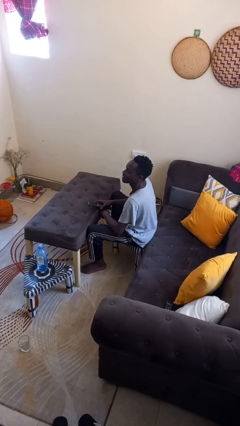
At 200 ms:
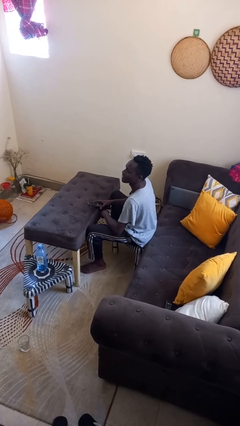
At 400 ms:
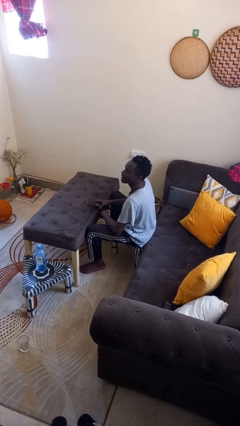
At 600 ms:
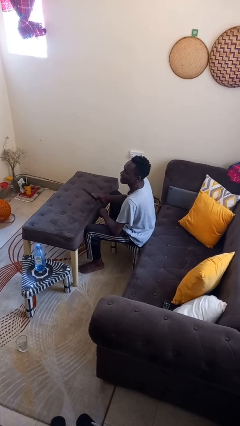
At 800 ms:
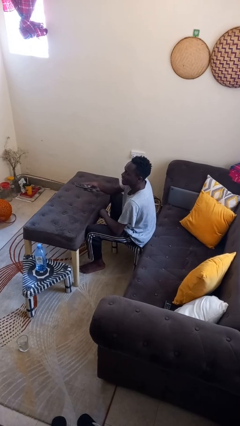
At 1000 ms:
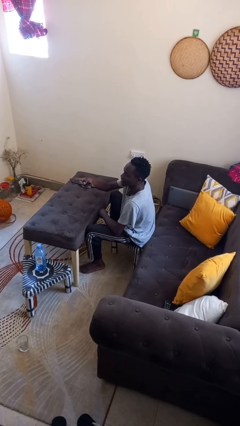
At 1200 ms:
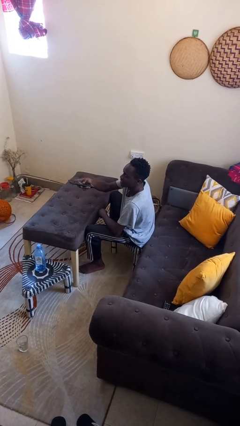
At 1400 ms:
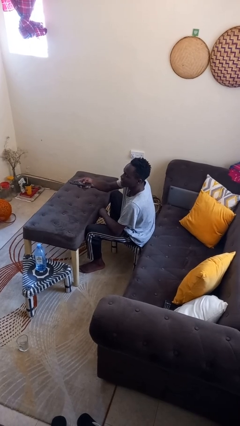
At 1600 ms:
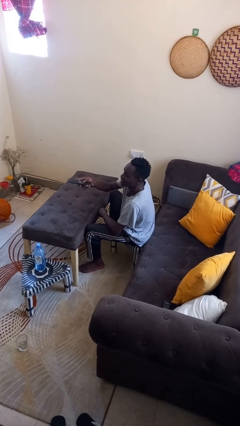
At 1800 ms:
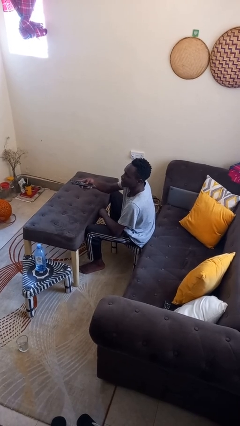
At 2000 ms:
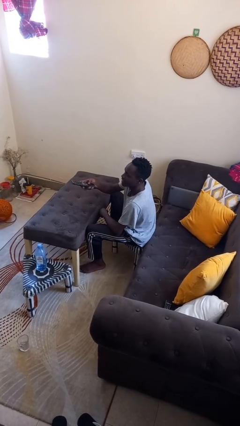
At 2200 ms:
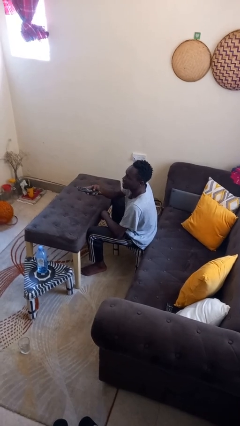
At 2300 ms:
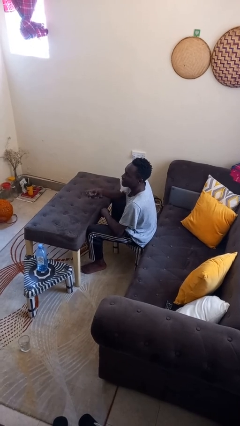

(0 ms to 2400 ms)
person uses television remote

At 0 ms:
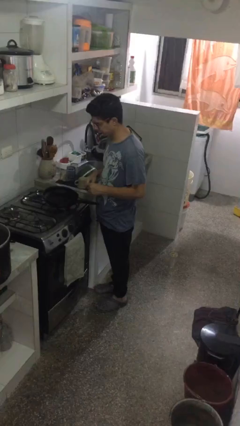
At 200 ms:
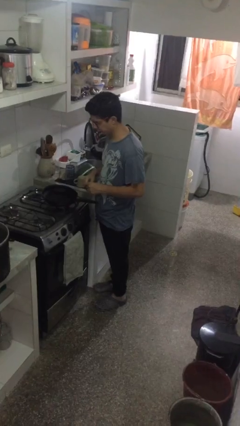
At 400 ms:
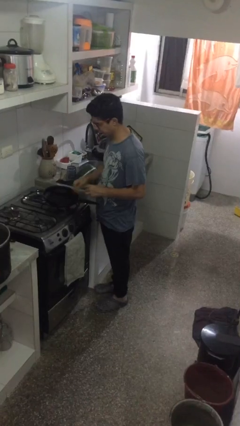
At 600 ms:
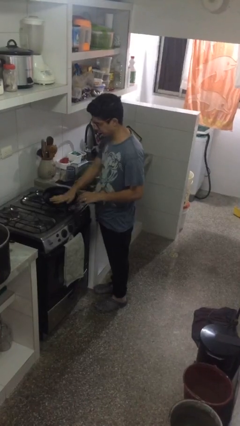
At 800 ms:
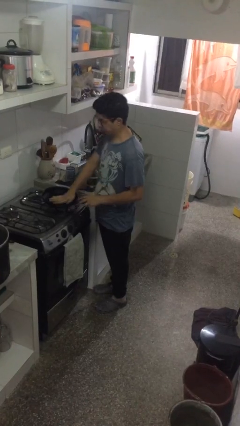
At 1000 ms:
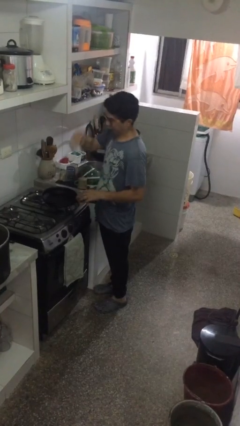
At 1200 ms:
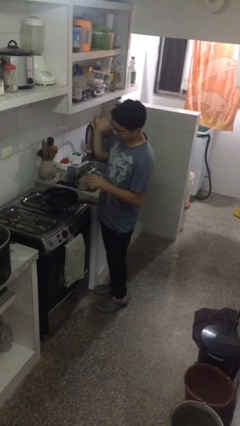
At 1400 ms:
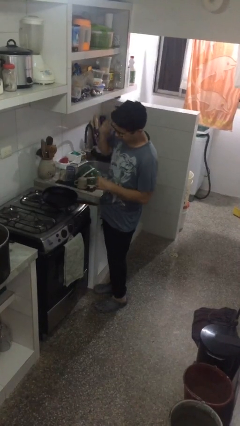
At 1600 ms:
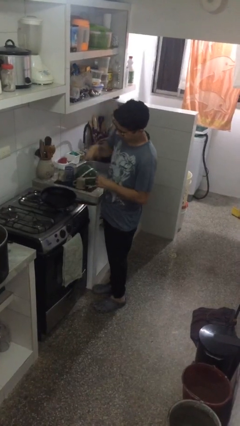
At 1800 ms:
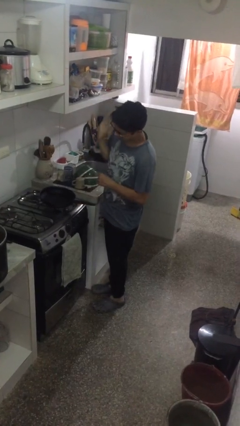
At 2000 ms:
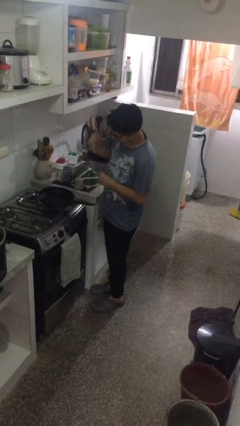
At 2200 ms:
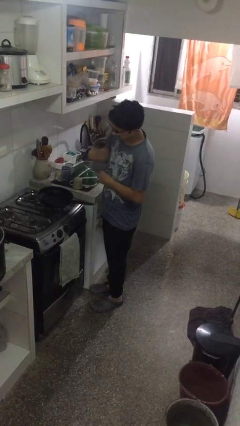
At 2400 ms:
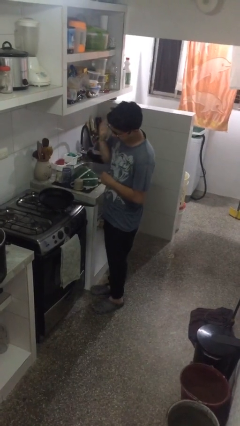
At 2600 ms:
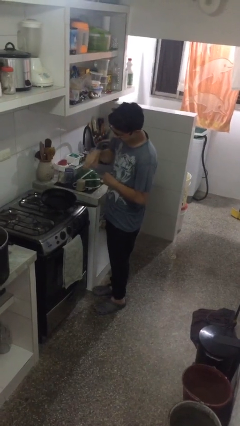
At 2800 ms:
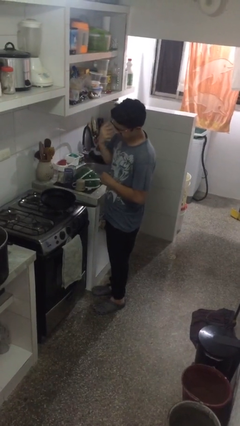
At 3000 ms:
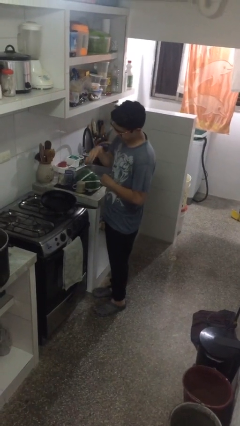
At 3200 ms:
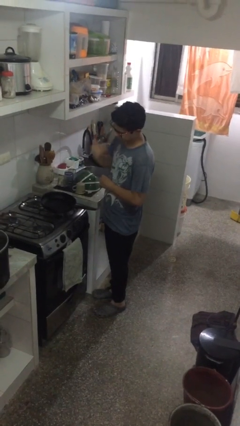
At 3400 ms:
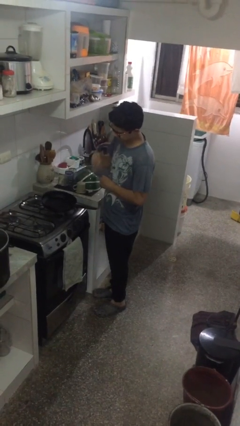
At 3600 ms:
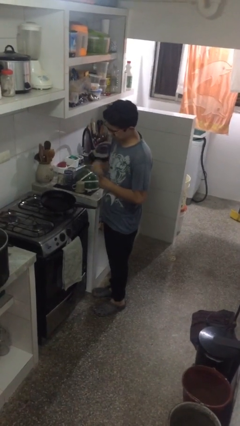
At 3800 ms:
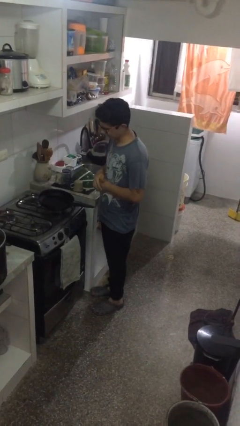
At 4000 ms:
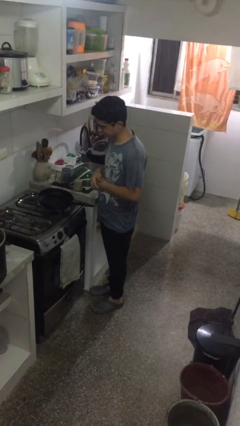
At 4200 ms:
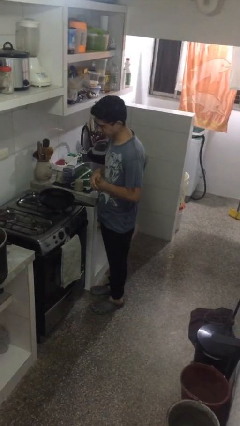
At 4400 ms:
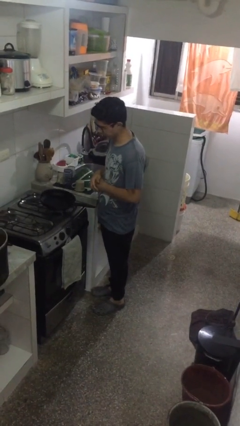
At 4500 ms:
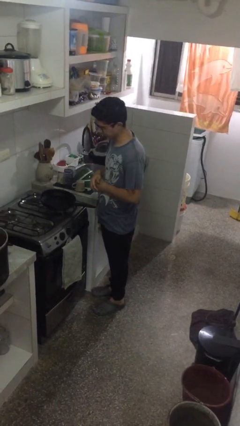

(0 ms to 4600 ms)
person burns hand

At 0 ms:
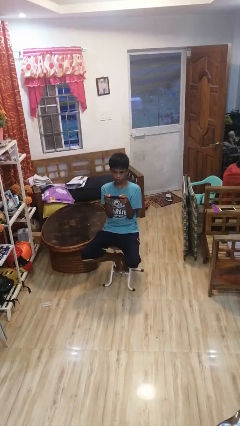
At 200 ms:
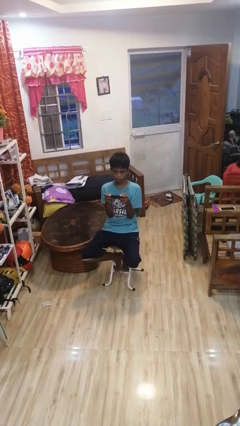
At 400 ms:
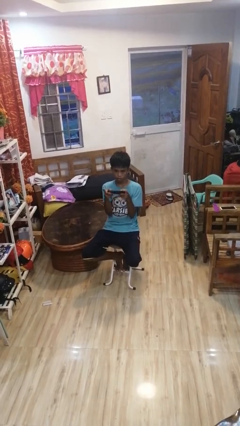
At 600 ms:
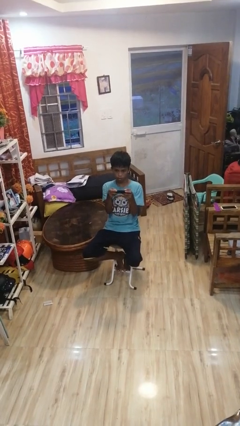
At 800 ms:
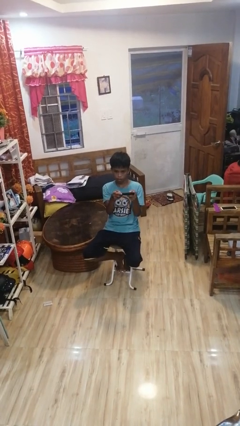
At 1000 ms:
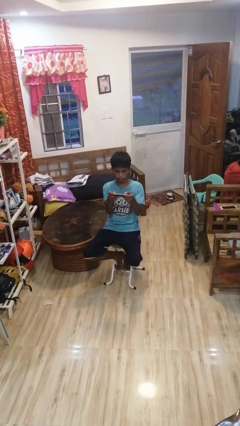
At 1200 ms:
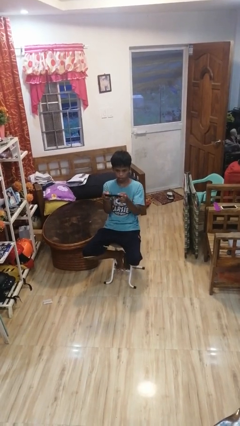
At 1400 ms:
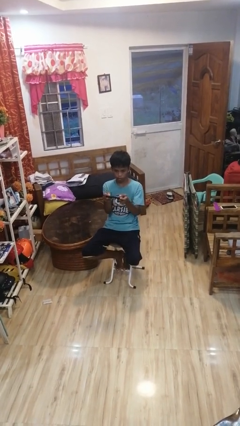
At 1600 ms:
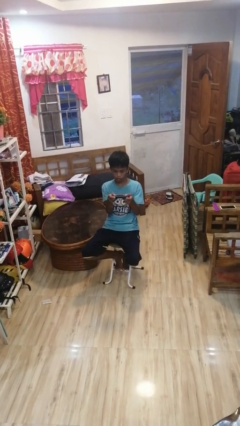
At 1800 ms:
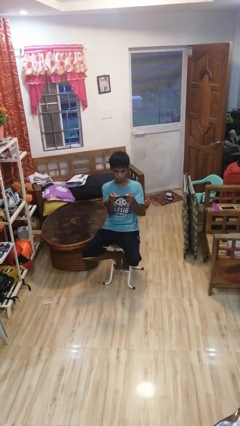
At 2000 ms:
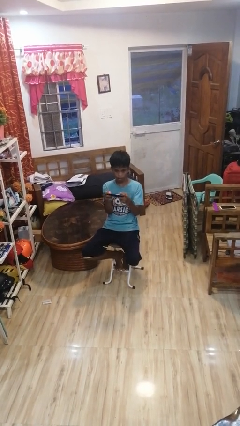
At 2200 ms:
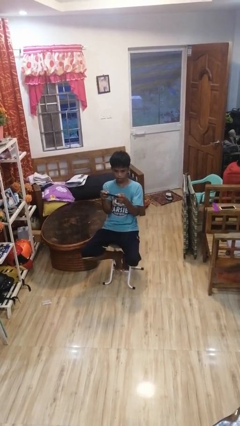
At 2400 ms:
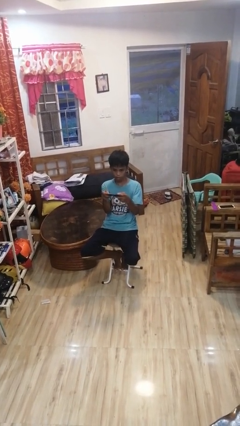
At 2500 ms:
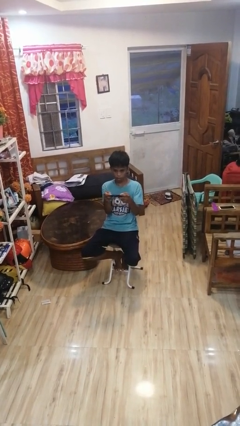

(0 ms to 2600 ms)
person interacts with handheld game

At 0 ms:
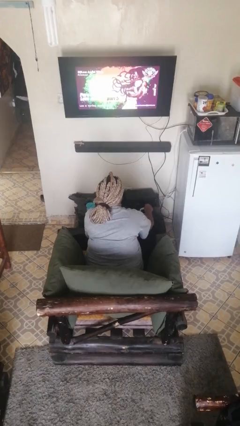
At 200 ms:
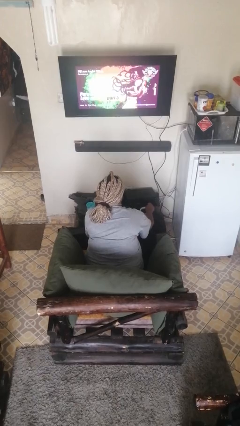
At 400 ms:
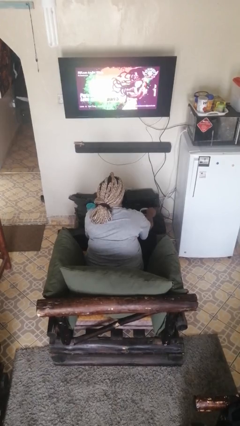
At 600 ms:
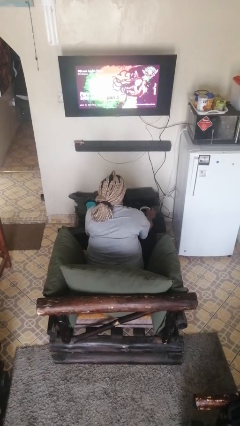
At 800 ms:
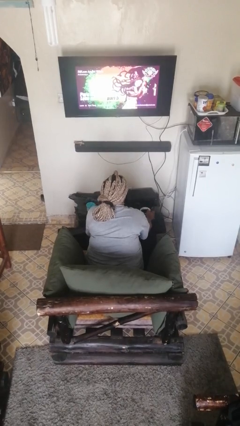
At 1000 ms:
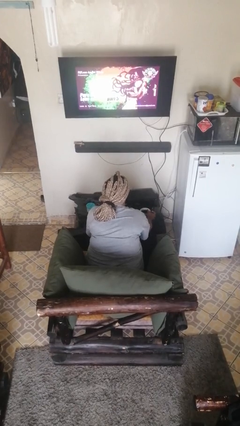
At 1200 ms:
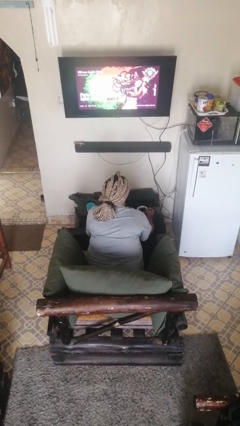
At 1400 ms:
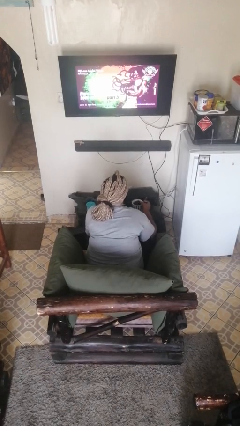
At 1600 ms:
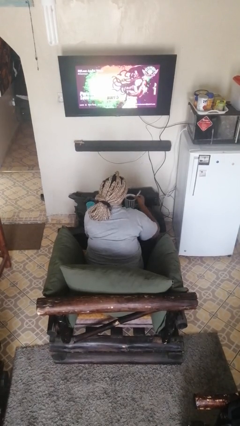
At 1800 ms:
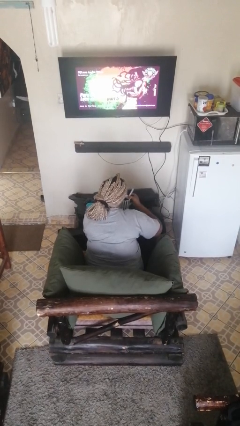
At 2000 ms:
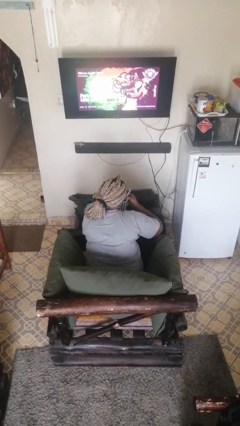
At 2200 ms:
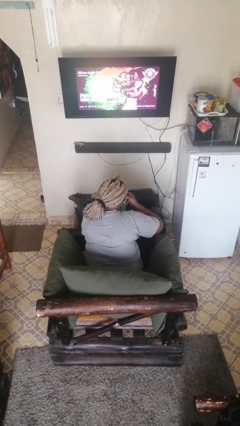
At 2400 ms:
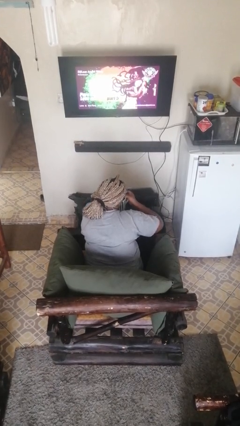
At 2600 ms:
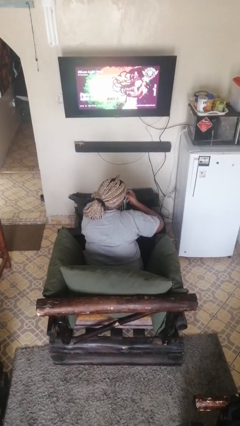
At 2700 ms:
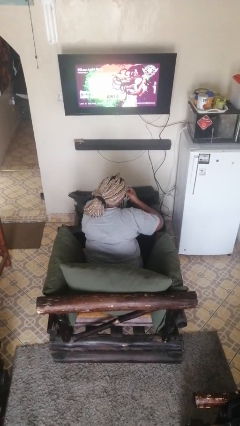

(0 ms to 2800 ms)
person drinks from mug

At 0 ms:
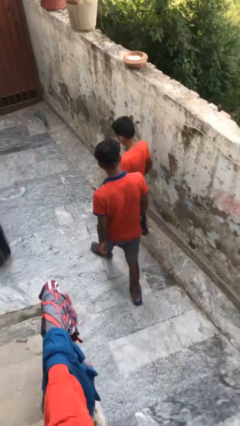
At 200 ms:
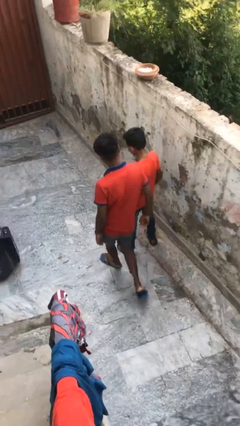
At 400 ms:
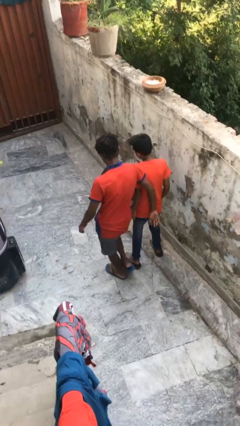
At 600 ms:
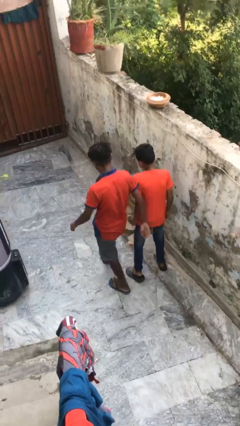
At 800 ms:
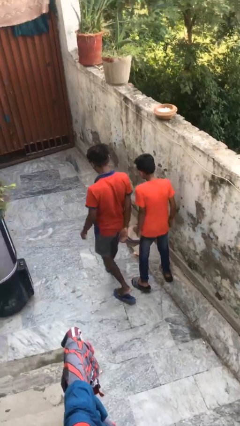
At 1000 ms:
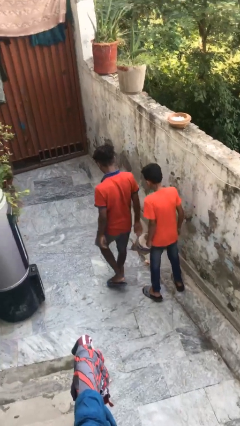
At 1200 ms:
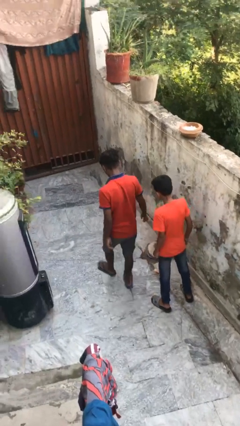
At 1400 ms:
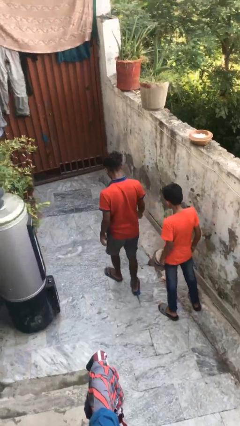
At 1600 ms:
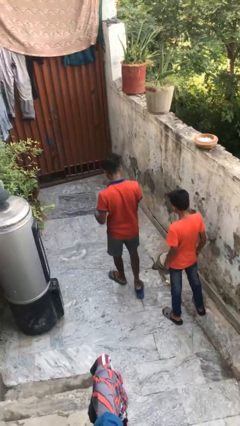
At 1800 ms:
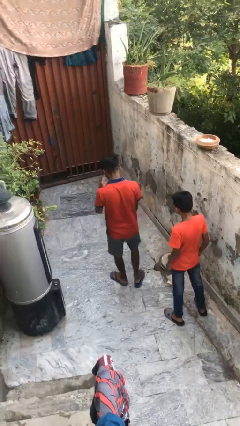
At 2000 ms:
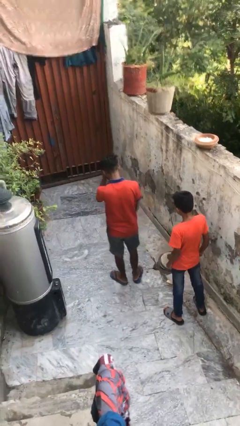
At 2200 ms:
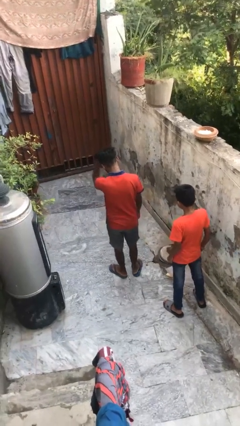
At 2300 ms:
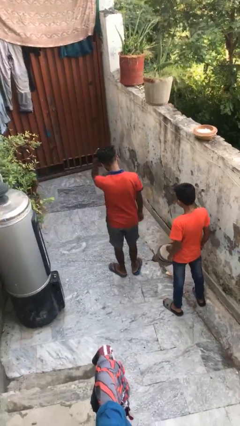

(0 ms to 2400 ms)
person bumps into person

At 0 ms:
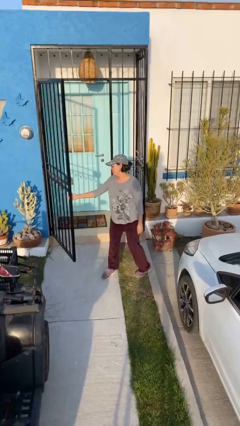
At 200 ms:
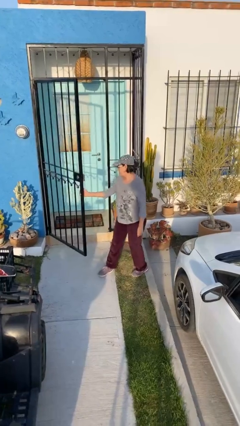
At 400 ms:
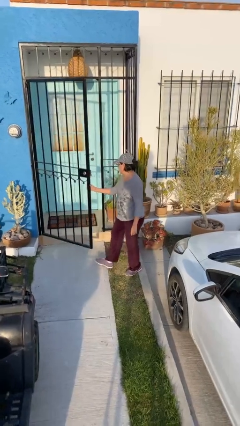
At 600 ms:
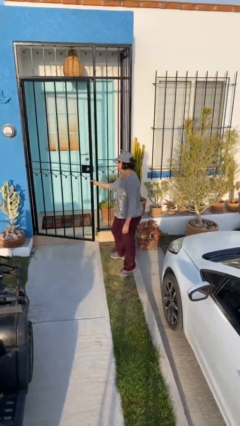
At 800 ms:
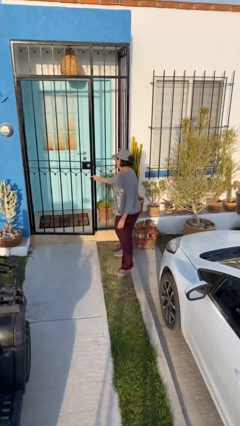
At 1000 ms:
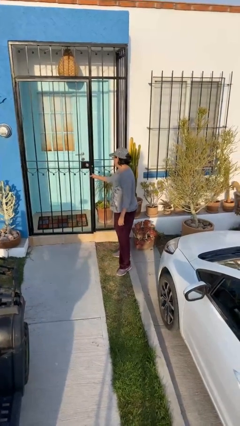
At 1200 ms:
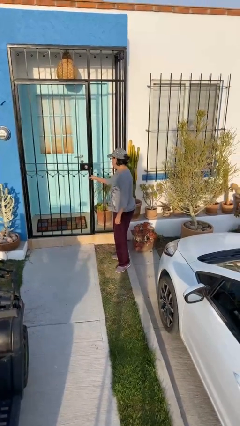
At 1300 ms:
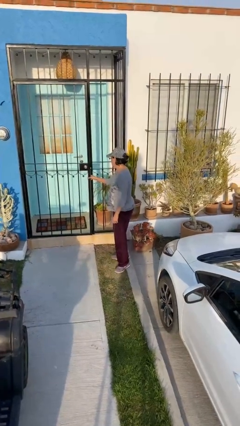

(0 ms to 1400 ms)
person closes facility door

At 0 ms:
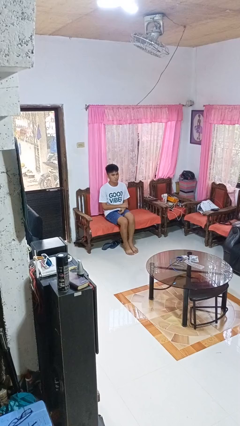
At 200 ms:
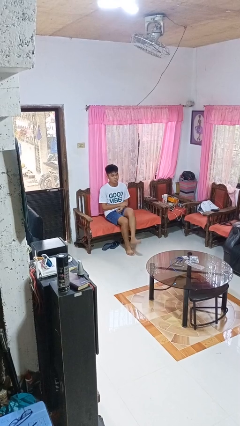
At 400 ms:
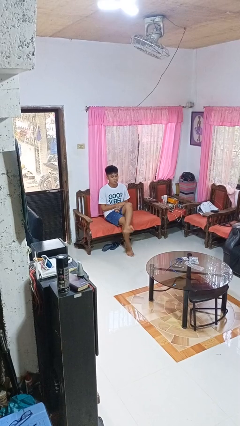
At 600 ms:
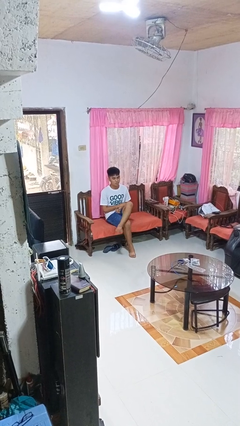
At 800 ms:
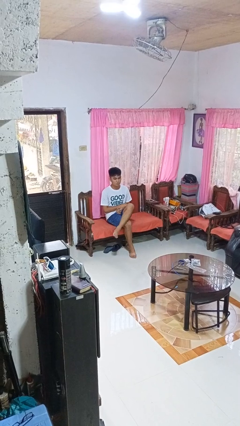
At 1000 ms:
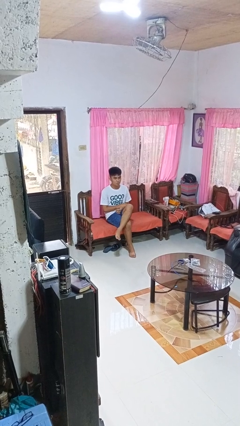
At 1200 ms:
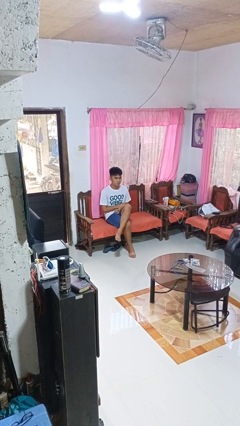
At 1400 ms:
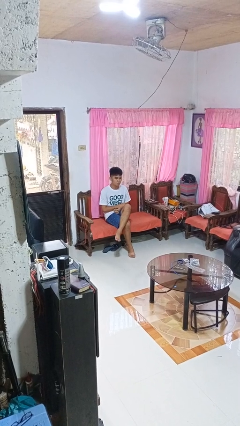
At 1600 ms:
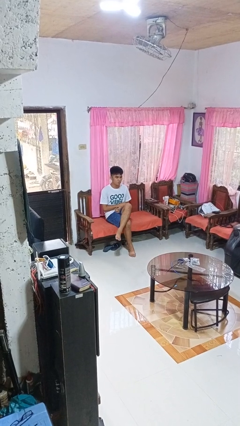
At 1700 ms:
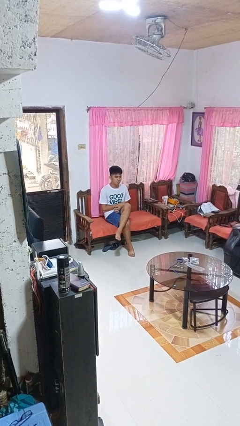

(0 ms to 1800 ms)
person crosses legs
